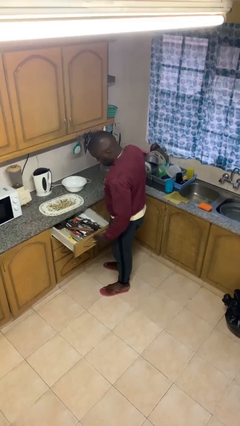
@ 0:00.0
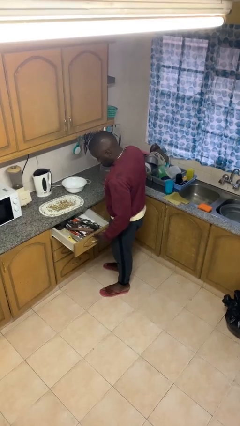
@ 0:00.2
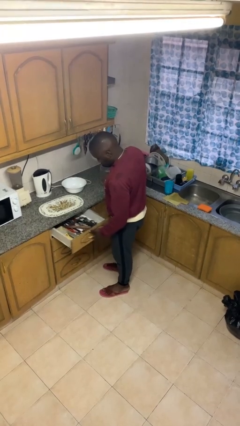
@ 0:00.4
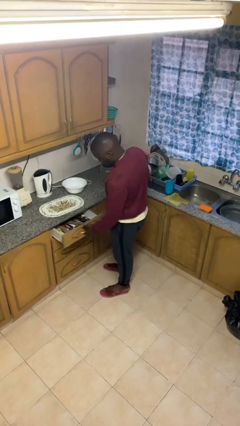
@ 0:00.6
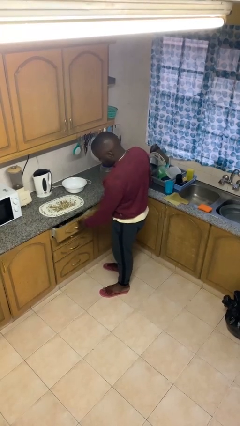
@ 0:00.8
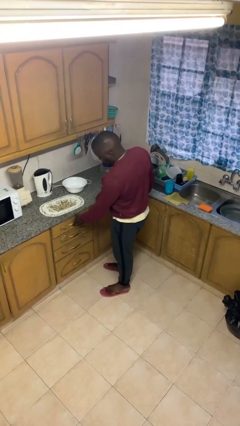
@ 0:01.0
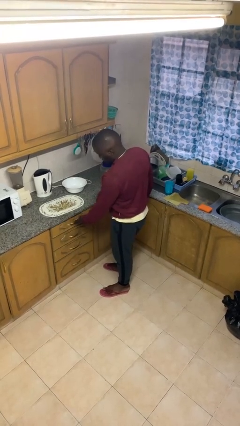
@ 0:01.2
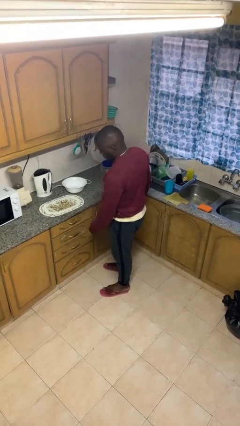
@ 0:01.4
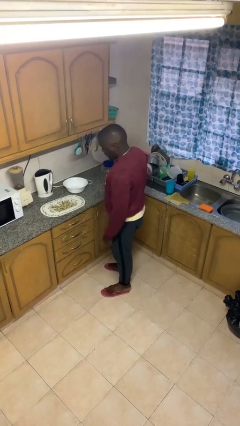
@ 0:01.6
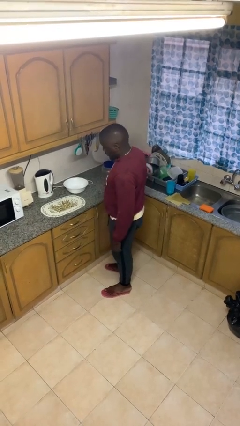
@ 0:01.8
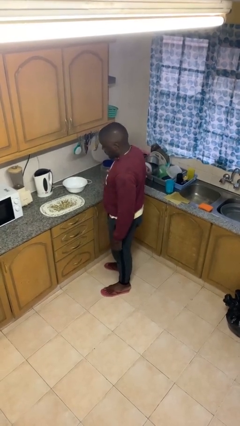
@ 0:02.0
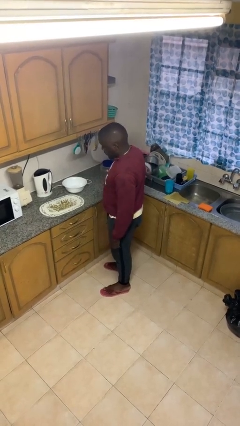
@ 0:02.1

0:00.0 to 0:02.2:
person closes kitchen drawer

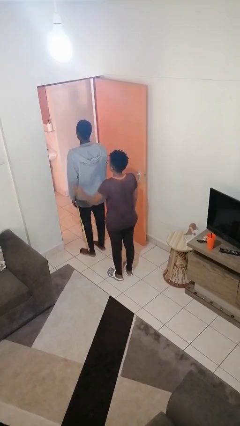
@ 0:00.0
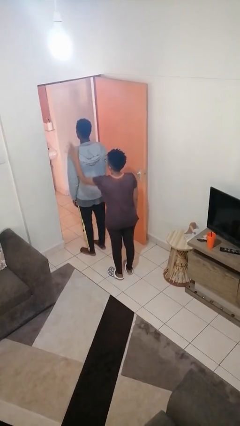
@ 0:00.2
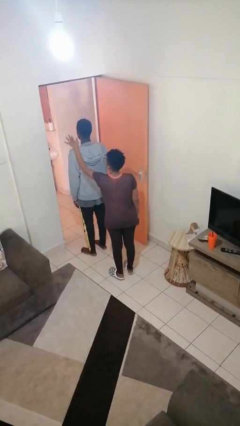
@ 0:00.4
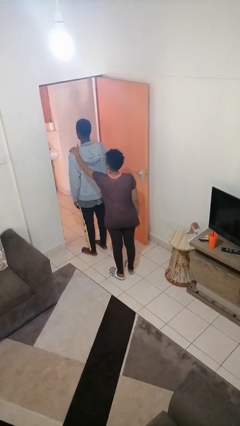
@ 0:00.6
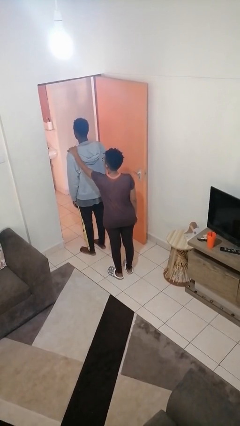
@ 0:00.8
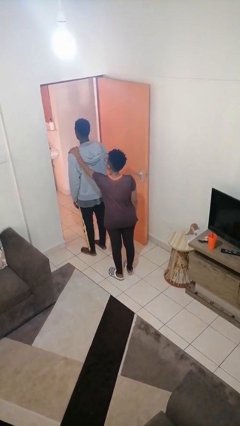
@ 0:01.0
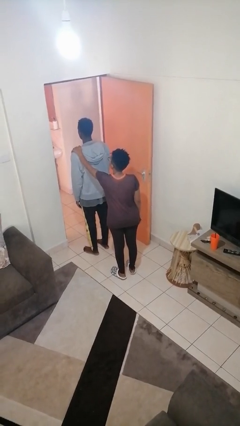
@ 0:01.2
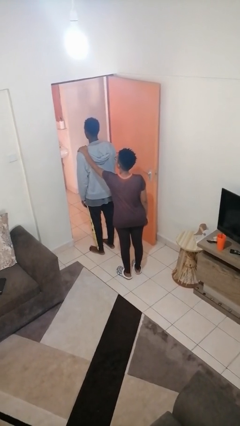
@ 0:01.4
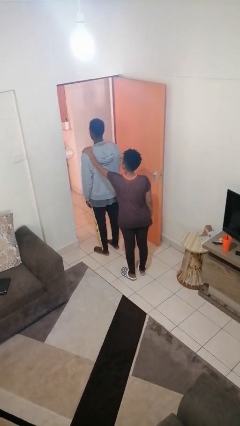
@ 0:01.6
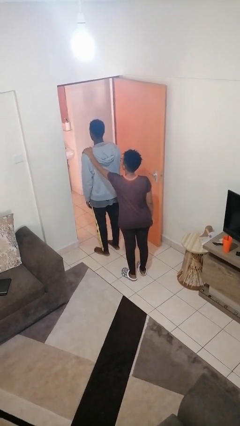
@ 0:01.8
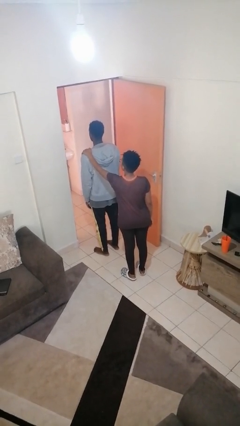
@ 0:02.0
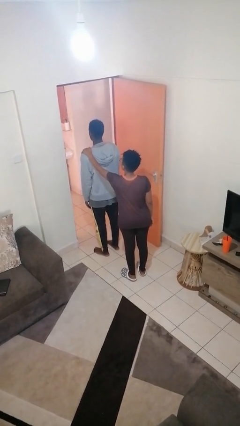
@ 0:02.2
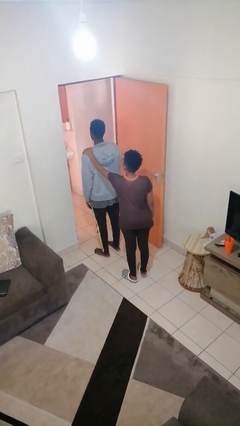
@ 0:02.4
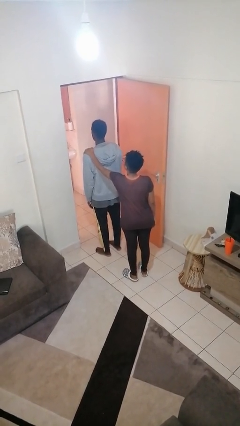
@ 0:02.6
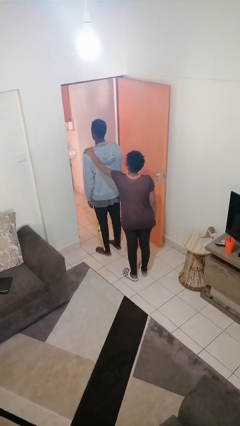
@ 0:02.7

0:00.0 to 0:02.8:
person grabs person by shoulder

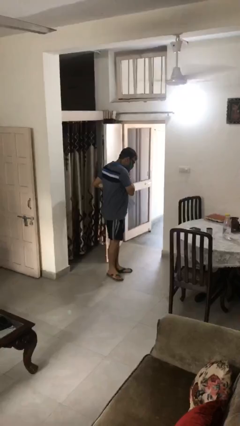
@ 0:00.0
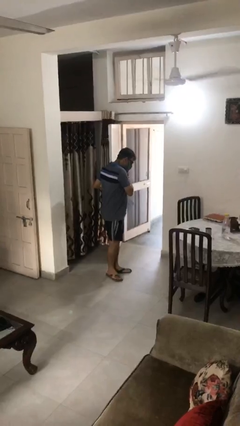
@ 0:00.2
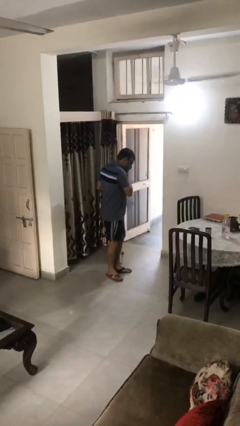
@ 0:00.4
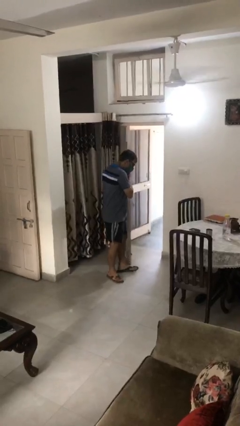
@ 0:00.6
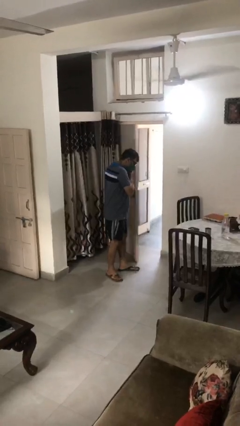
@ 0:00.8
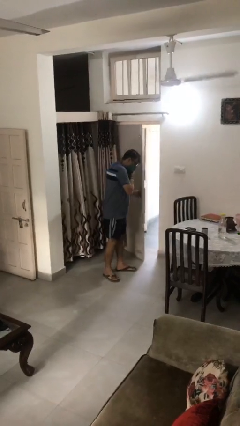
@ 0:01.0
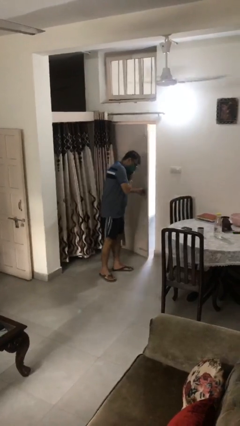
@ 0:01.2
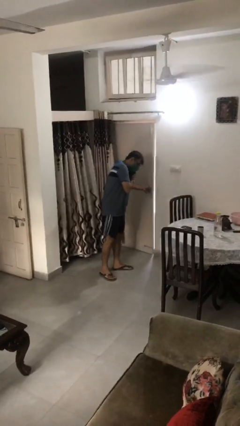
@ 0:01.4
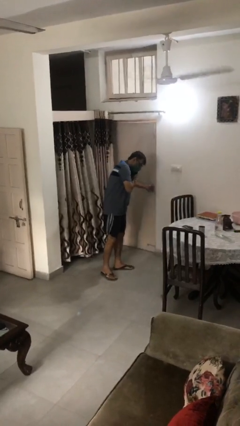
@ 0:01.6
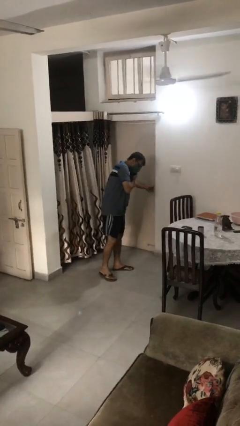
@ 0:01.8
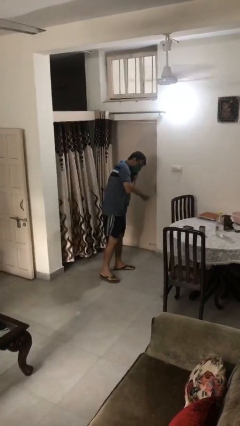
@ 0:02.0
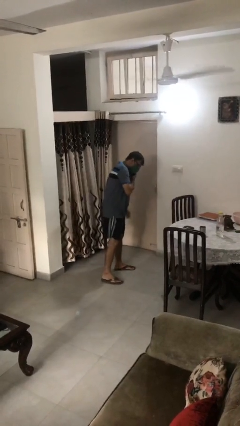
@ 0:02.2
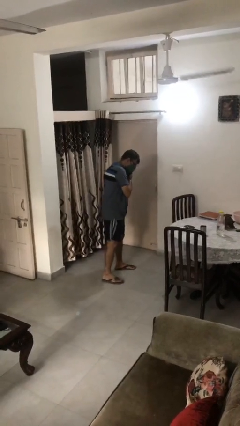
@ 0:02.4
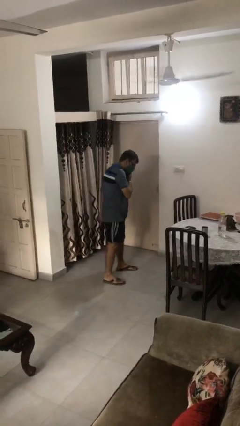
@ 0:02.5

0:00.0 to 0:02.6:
person closes facility door

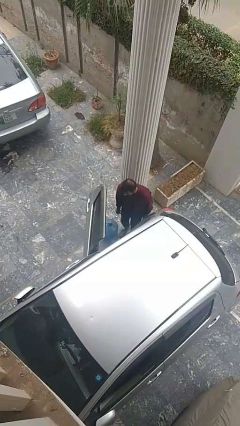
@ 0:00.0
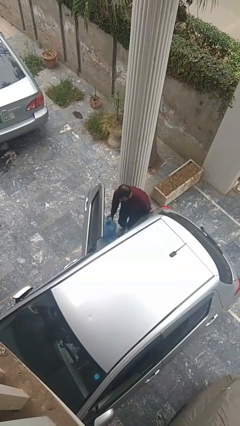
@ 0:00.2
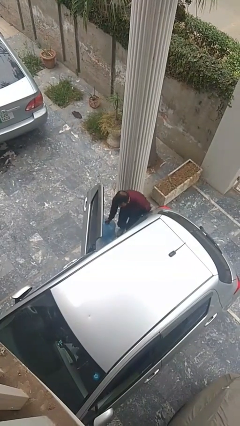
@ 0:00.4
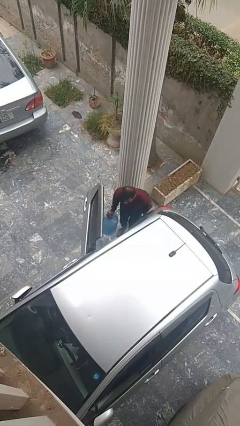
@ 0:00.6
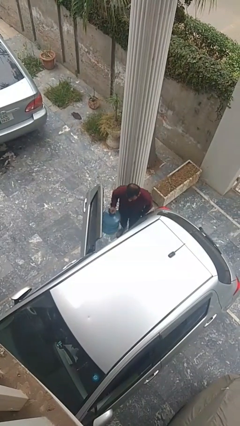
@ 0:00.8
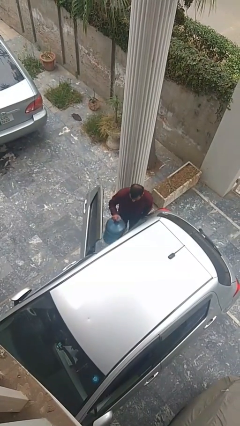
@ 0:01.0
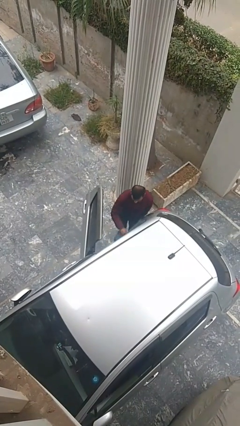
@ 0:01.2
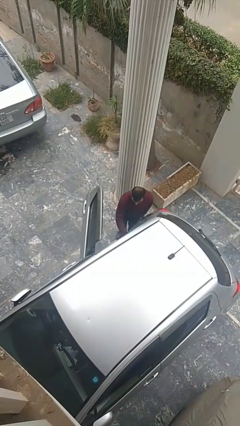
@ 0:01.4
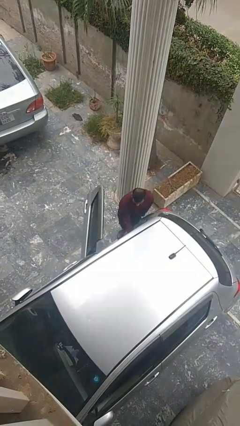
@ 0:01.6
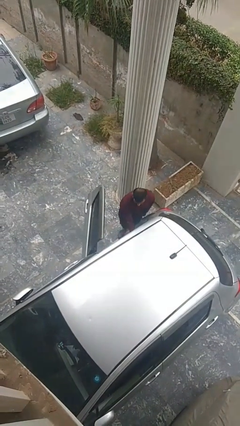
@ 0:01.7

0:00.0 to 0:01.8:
person loads car

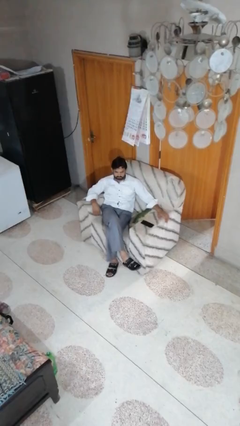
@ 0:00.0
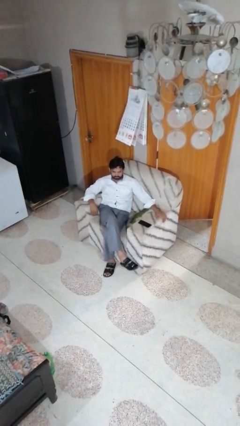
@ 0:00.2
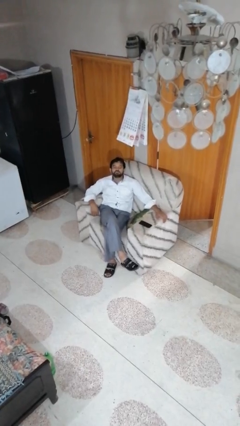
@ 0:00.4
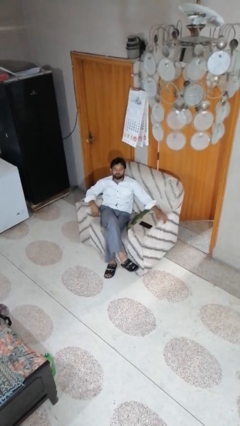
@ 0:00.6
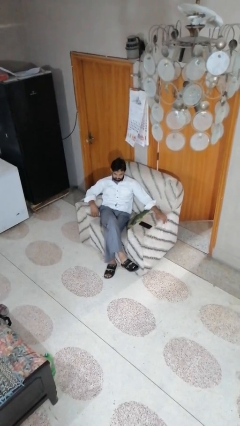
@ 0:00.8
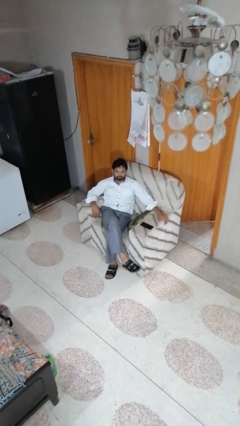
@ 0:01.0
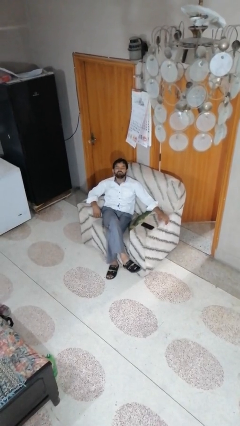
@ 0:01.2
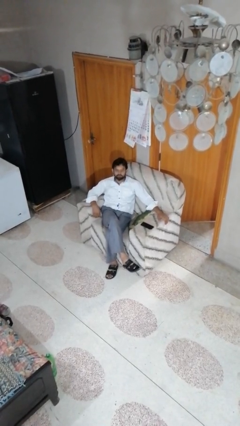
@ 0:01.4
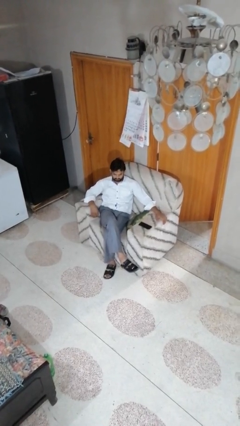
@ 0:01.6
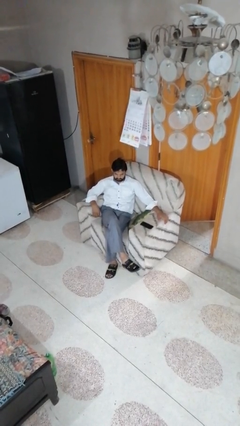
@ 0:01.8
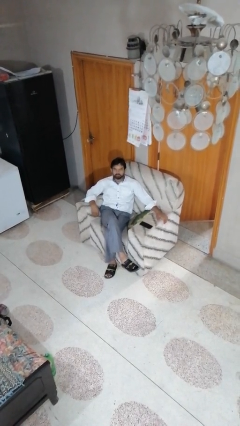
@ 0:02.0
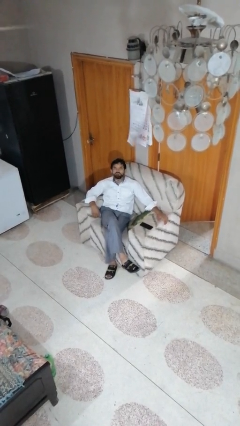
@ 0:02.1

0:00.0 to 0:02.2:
person nods head

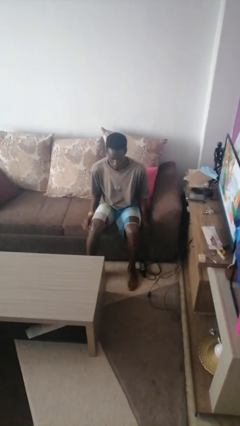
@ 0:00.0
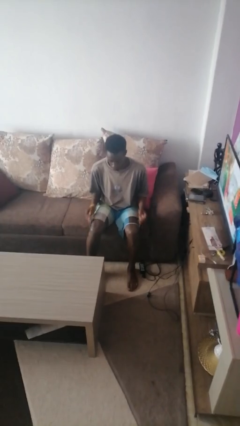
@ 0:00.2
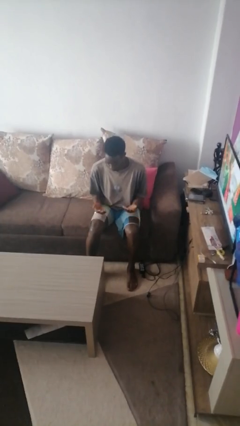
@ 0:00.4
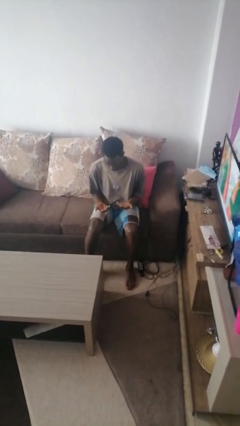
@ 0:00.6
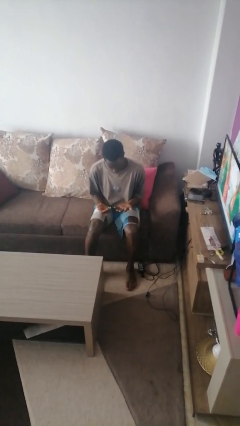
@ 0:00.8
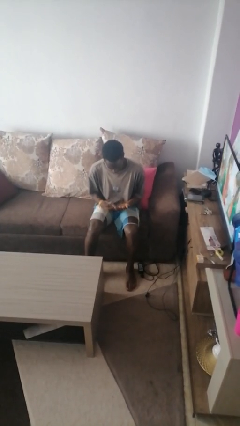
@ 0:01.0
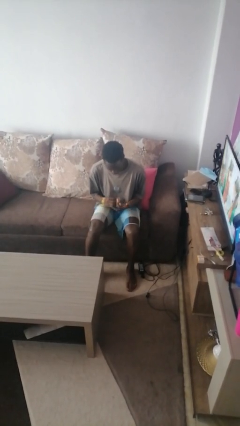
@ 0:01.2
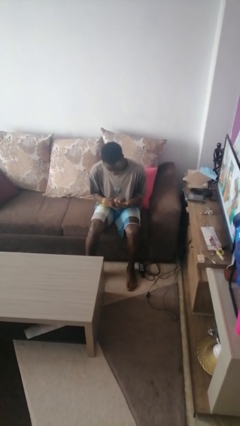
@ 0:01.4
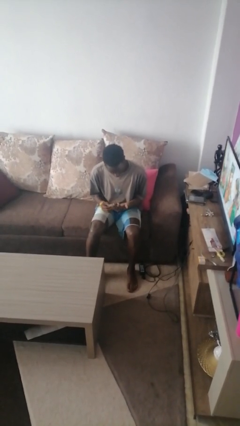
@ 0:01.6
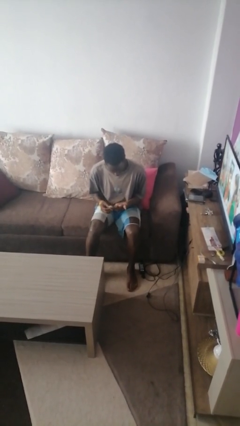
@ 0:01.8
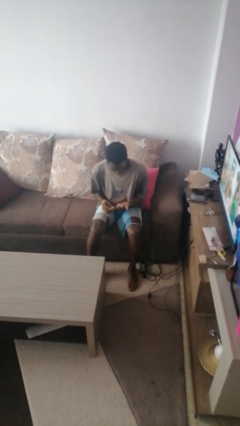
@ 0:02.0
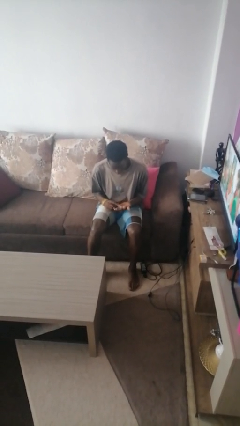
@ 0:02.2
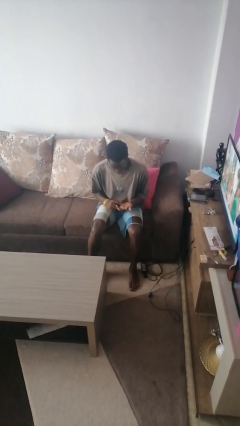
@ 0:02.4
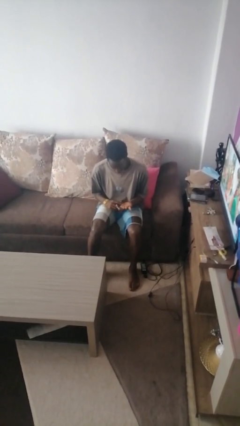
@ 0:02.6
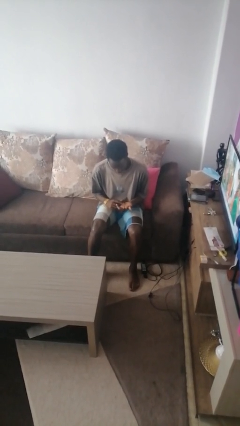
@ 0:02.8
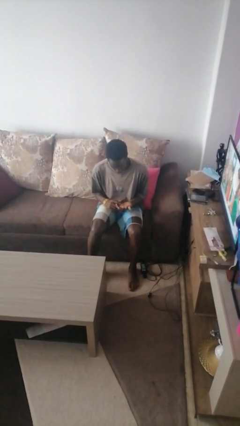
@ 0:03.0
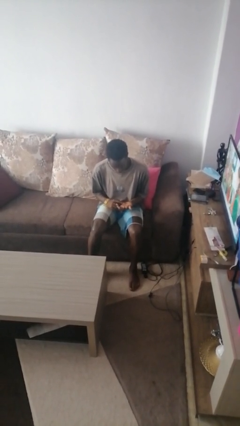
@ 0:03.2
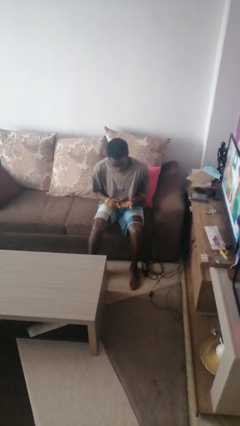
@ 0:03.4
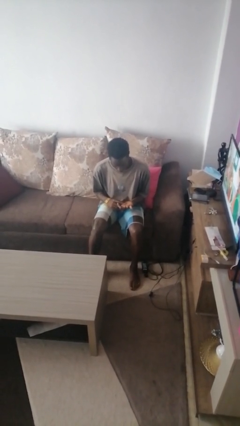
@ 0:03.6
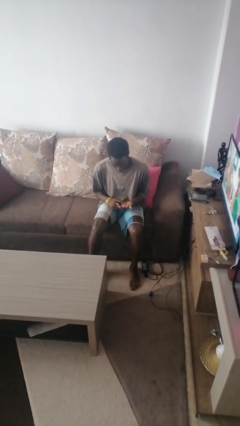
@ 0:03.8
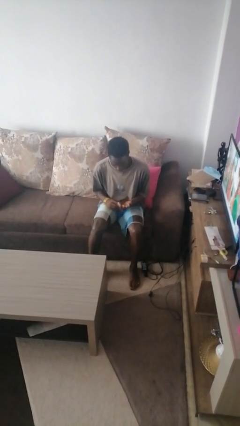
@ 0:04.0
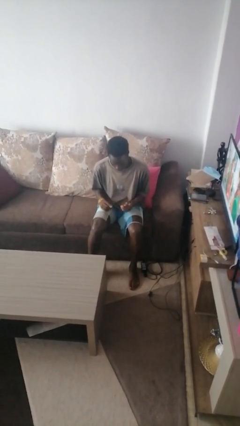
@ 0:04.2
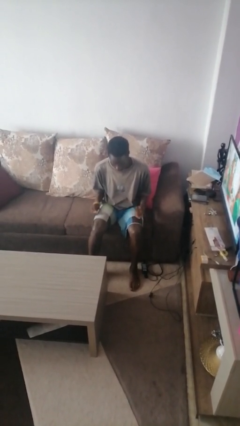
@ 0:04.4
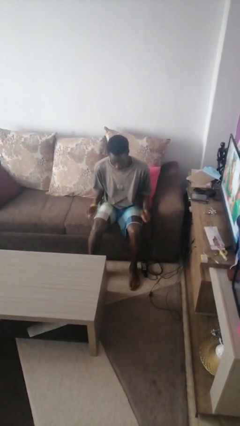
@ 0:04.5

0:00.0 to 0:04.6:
person looks at hands in lap

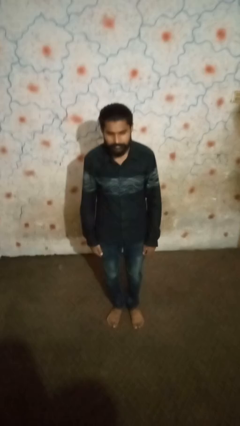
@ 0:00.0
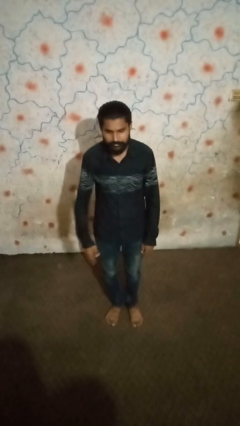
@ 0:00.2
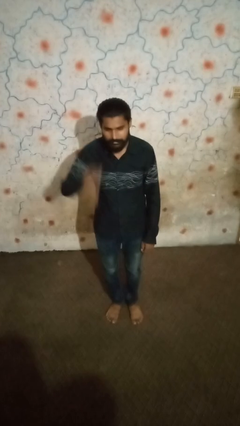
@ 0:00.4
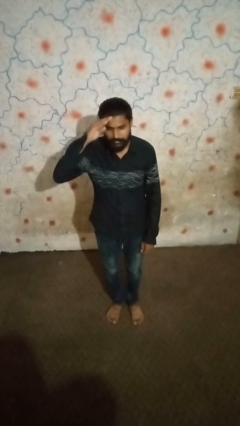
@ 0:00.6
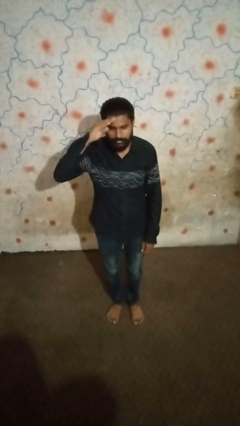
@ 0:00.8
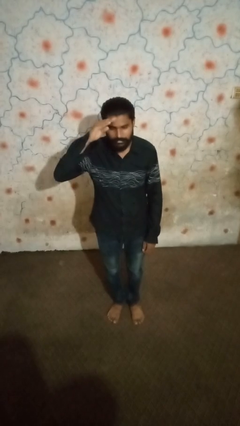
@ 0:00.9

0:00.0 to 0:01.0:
person salutes
